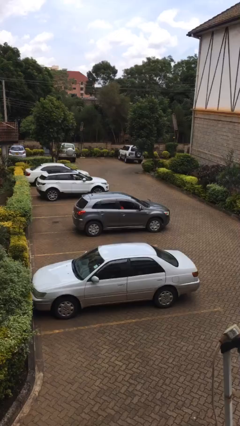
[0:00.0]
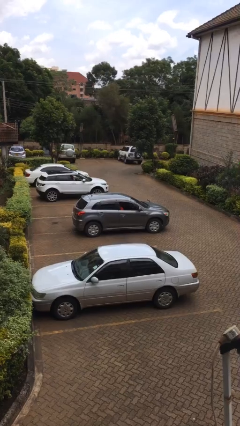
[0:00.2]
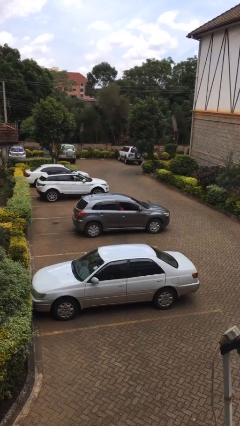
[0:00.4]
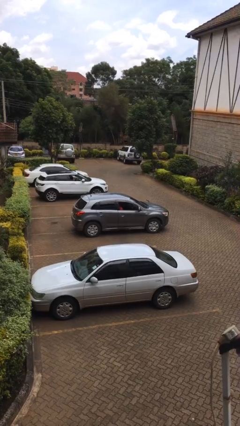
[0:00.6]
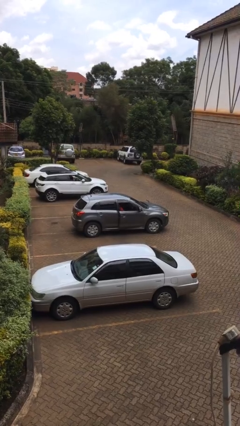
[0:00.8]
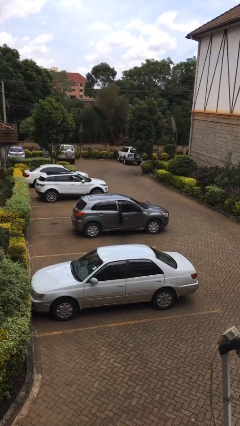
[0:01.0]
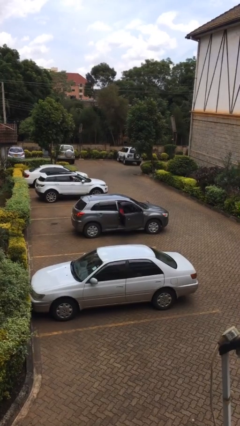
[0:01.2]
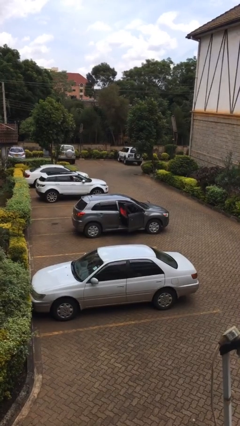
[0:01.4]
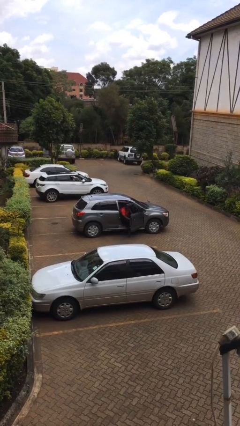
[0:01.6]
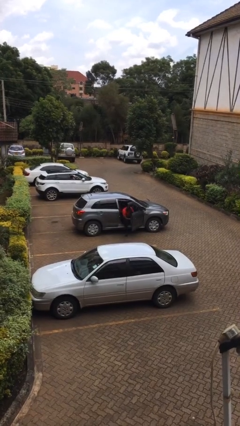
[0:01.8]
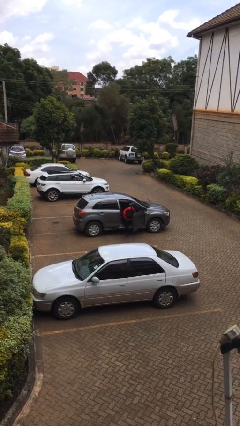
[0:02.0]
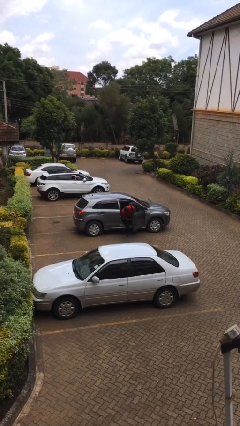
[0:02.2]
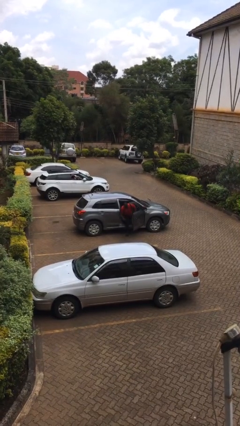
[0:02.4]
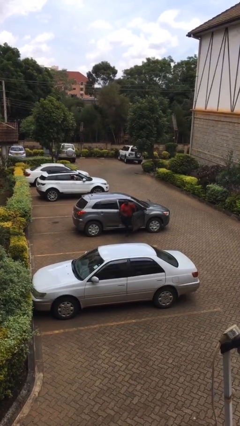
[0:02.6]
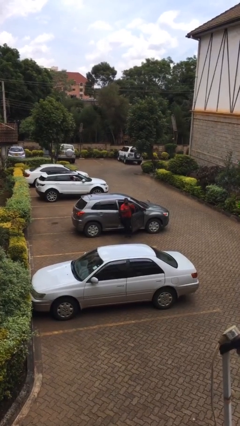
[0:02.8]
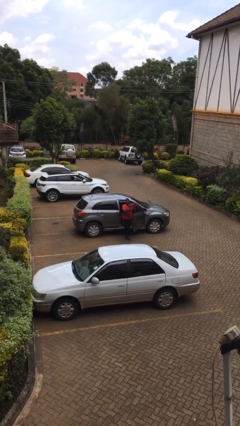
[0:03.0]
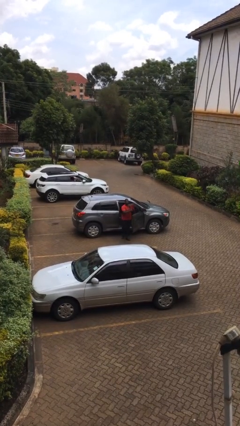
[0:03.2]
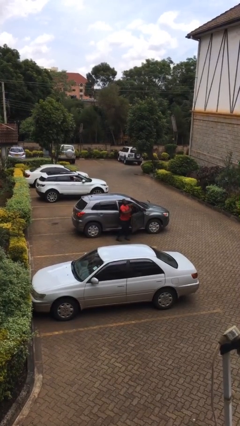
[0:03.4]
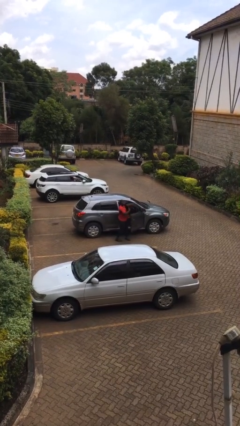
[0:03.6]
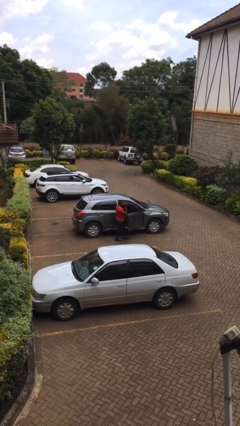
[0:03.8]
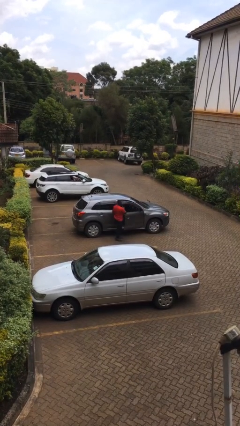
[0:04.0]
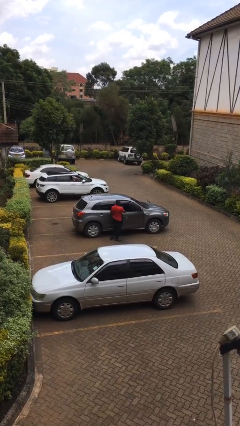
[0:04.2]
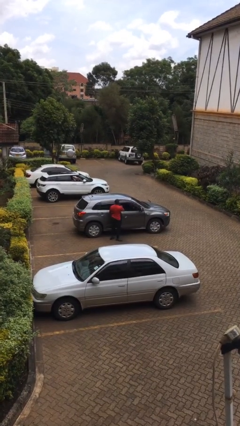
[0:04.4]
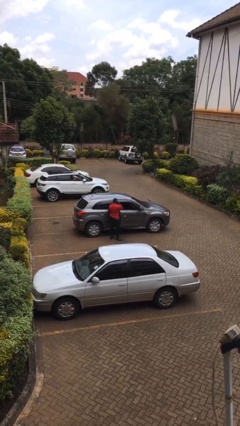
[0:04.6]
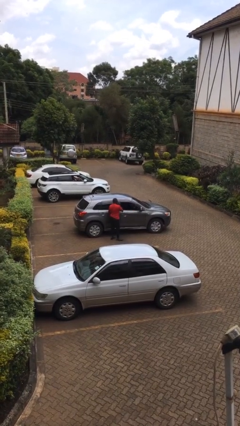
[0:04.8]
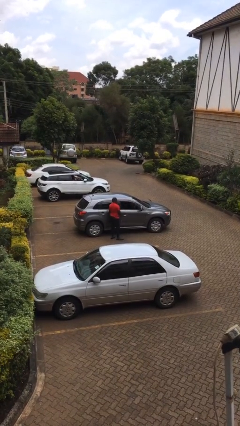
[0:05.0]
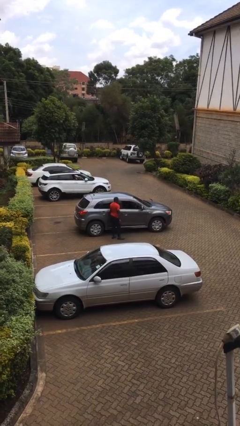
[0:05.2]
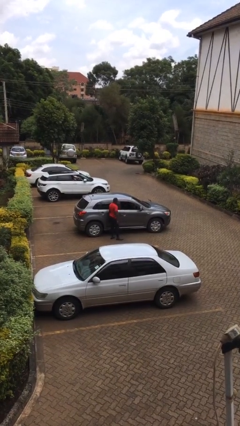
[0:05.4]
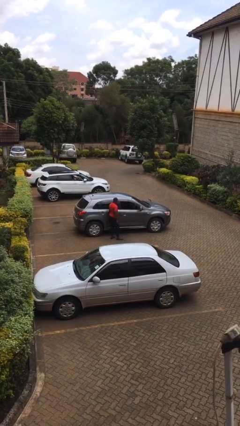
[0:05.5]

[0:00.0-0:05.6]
car drops off person

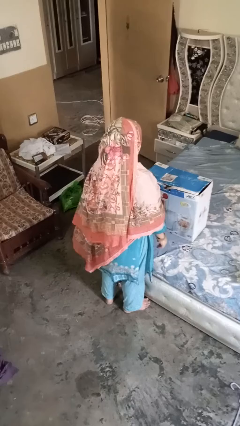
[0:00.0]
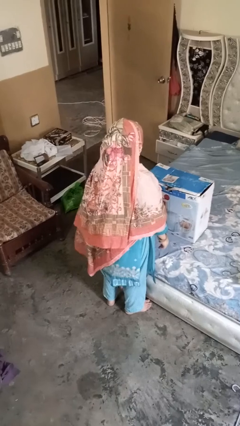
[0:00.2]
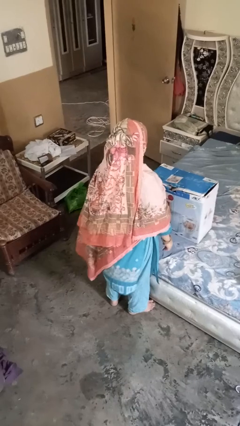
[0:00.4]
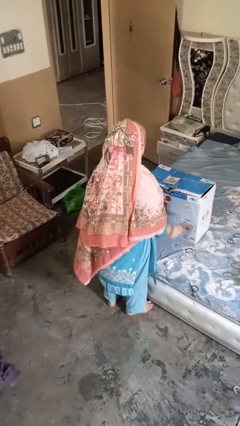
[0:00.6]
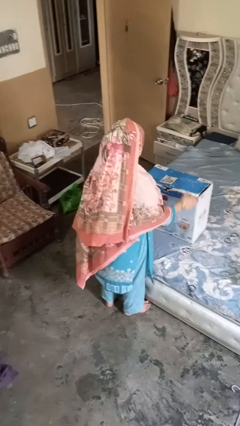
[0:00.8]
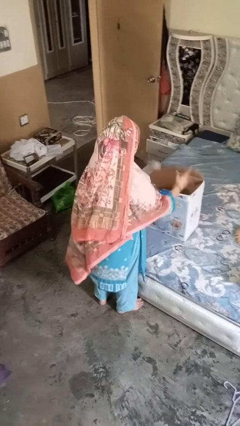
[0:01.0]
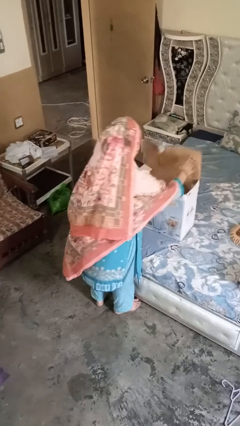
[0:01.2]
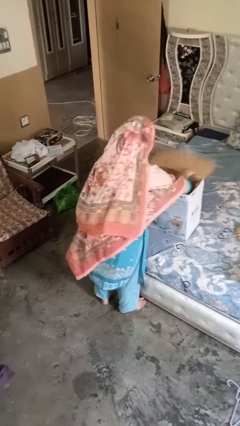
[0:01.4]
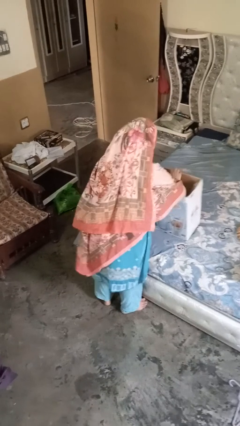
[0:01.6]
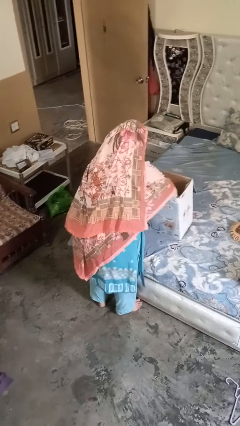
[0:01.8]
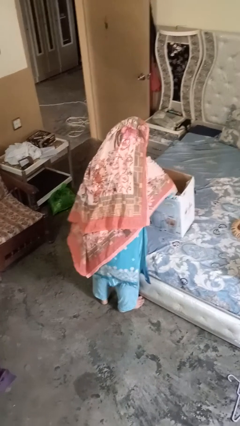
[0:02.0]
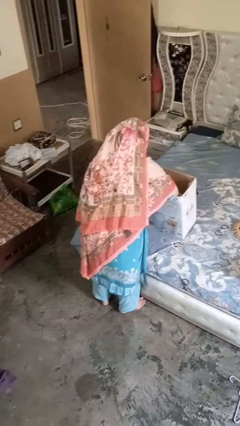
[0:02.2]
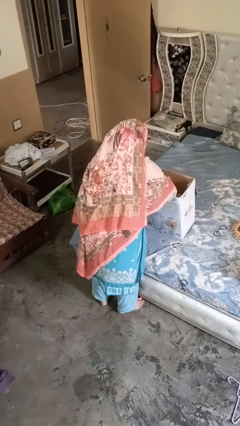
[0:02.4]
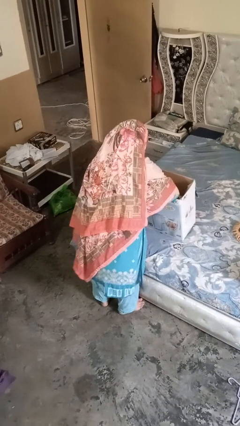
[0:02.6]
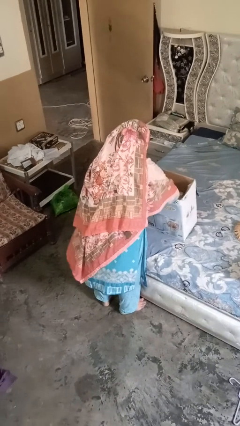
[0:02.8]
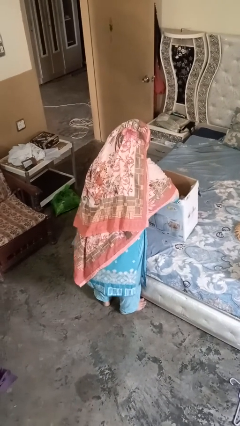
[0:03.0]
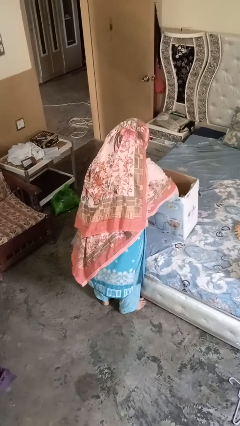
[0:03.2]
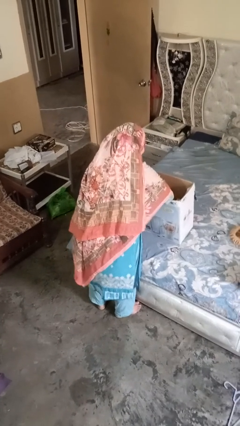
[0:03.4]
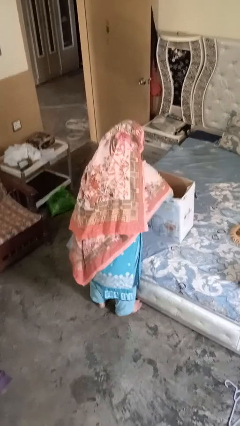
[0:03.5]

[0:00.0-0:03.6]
person searches in box

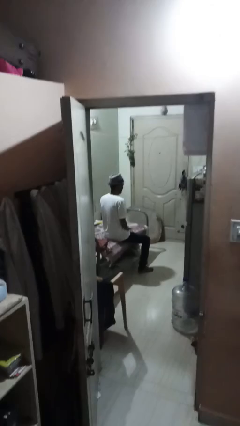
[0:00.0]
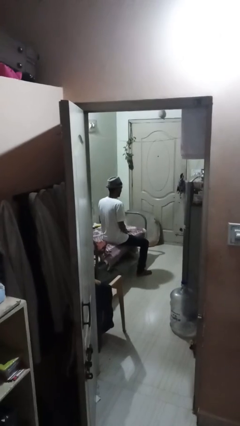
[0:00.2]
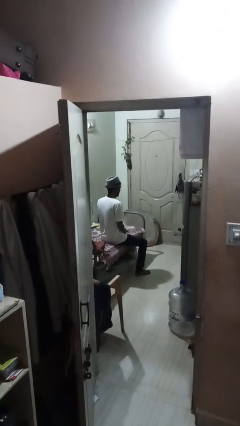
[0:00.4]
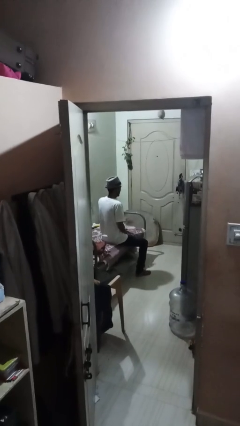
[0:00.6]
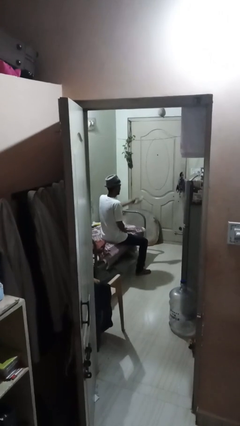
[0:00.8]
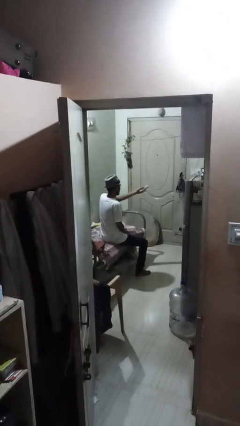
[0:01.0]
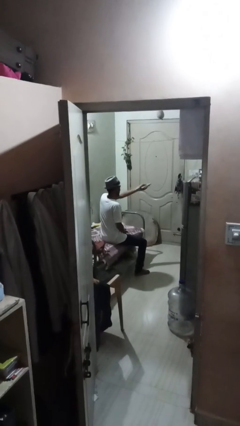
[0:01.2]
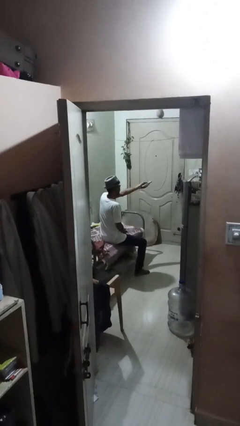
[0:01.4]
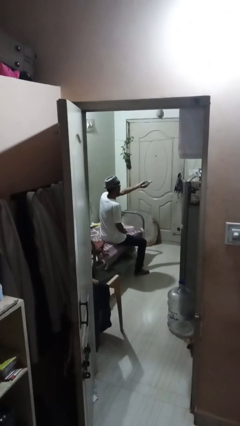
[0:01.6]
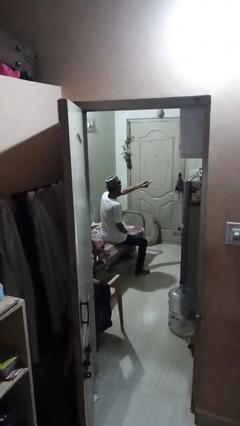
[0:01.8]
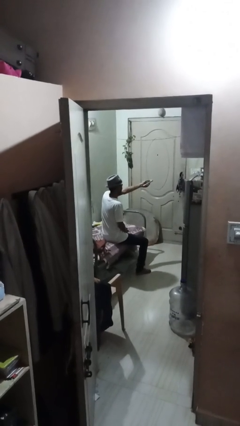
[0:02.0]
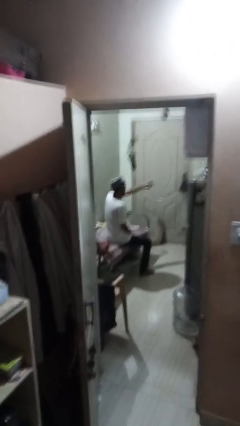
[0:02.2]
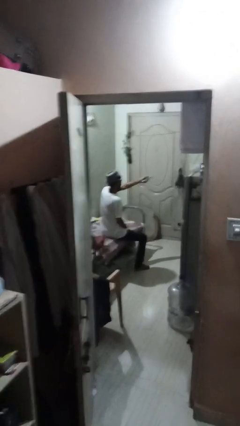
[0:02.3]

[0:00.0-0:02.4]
person uses television remote

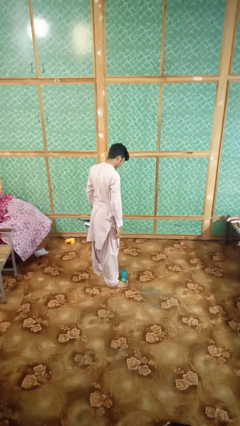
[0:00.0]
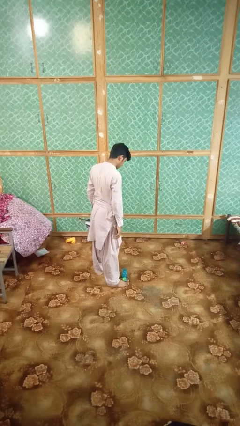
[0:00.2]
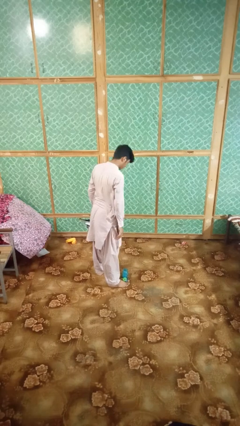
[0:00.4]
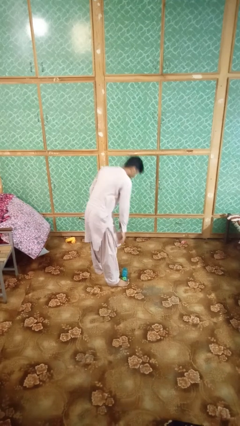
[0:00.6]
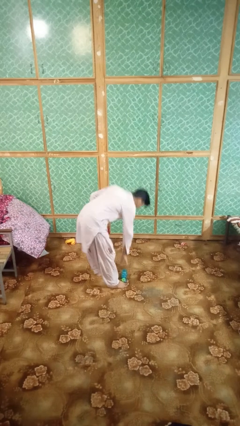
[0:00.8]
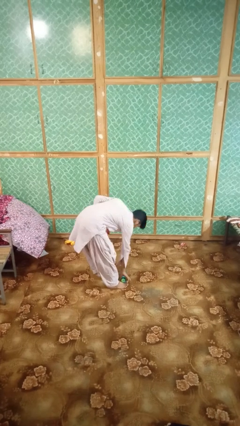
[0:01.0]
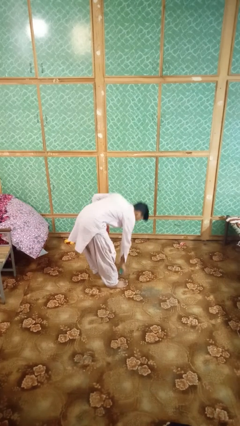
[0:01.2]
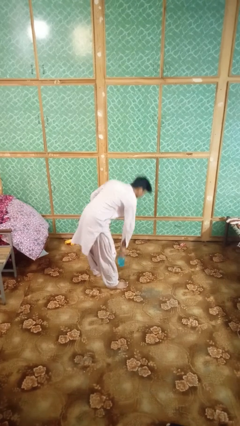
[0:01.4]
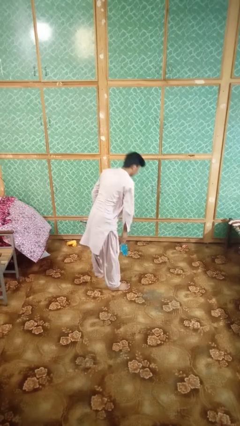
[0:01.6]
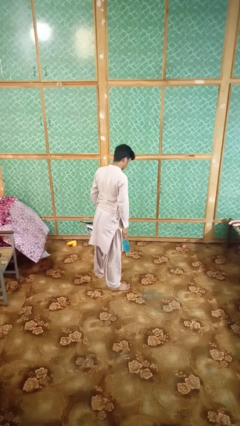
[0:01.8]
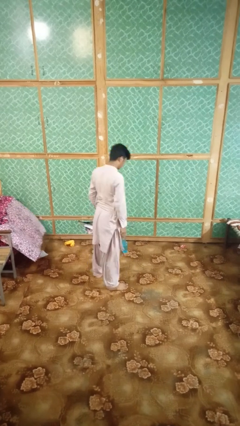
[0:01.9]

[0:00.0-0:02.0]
person picks up object from floor

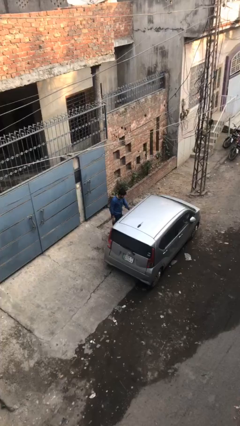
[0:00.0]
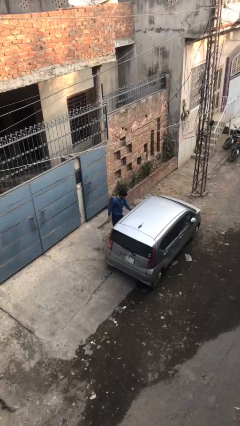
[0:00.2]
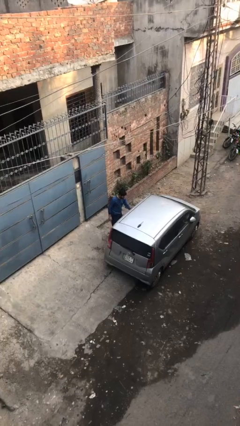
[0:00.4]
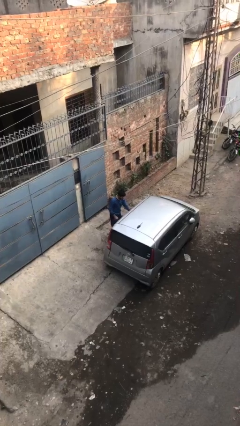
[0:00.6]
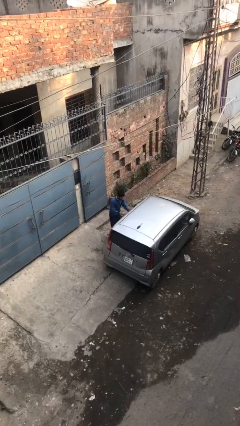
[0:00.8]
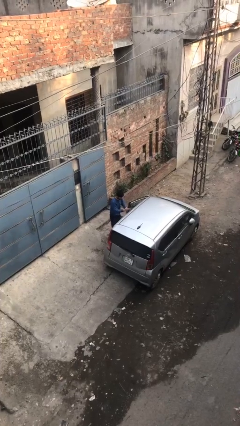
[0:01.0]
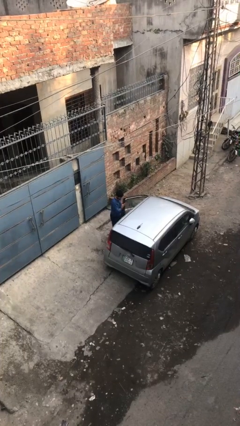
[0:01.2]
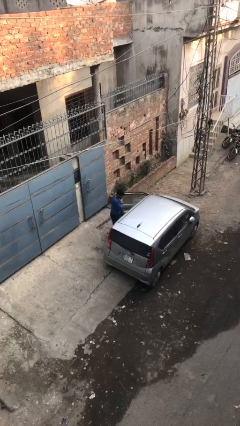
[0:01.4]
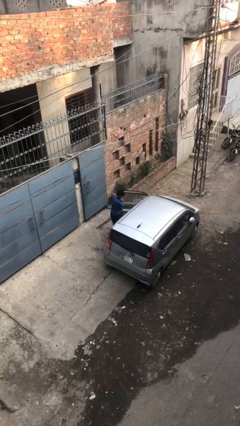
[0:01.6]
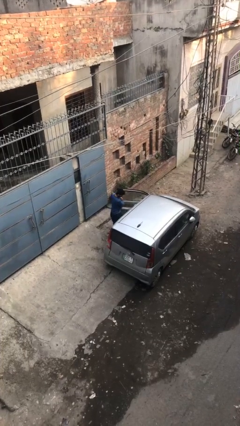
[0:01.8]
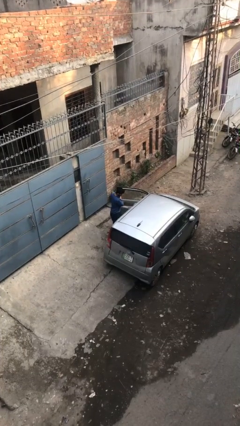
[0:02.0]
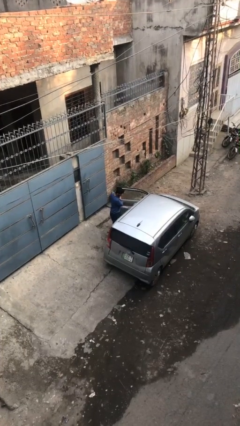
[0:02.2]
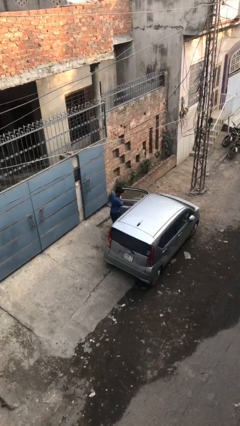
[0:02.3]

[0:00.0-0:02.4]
person opens car door

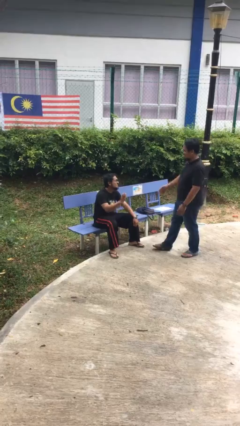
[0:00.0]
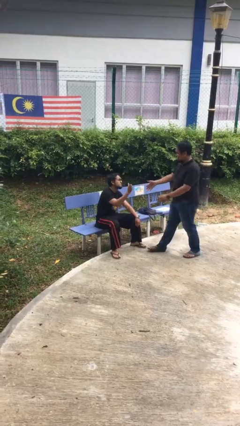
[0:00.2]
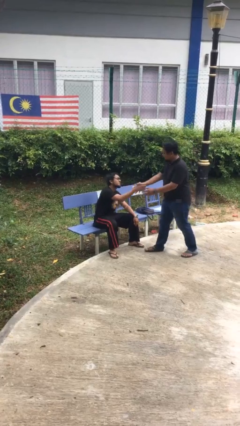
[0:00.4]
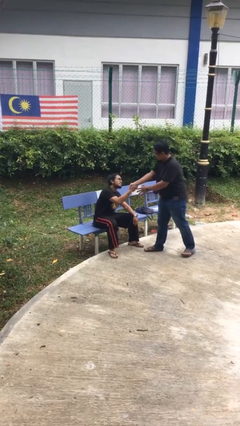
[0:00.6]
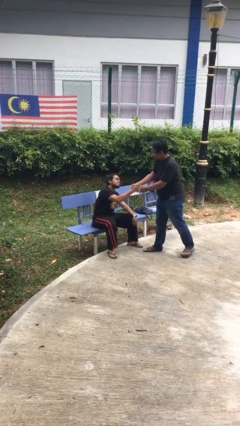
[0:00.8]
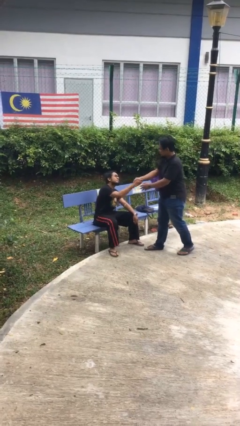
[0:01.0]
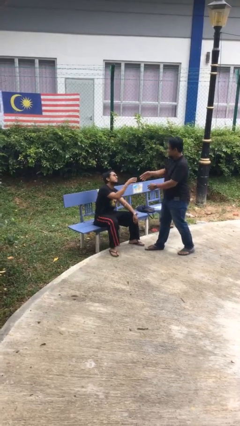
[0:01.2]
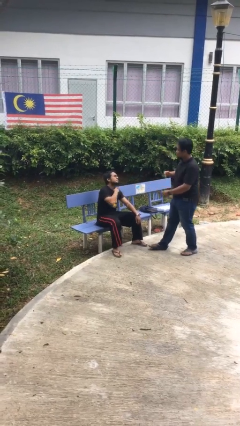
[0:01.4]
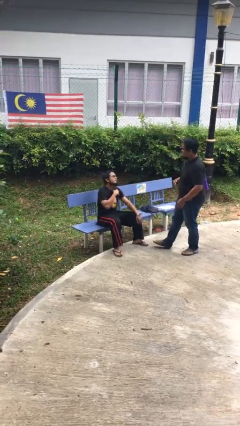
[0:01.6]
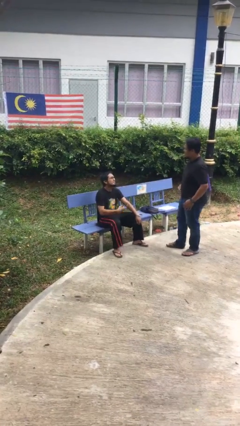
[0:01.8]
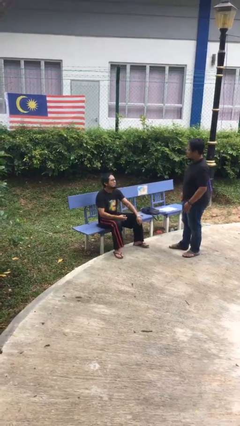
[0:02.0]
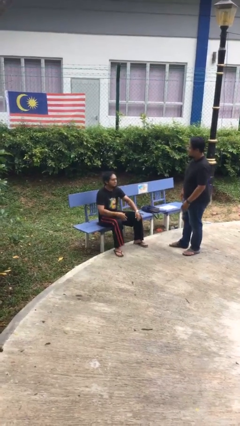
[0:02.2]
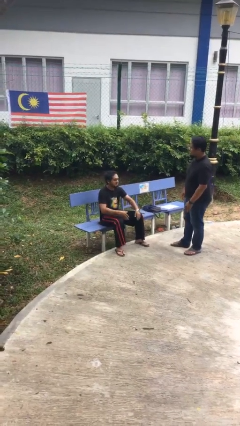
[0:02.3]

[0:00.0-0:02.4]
person shakes hand
